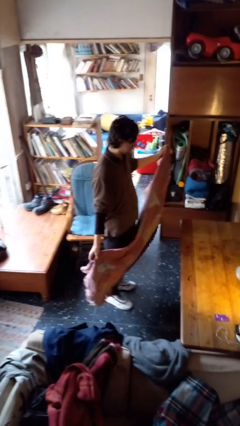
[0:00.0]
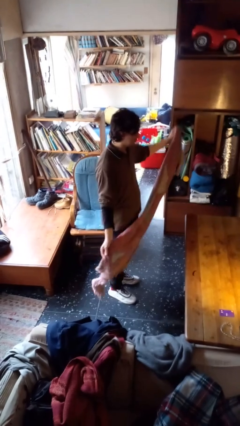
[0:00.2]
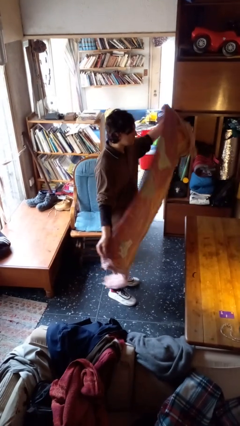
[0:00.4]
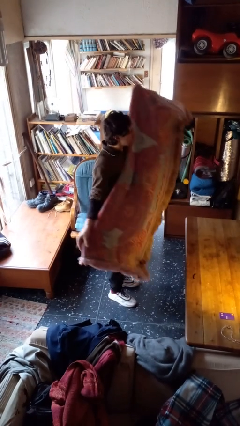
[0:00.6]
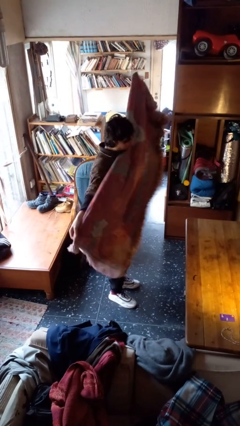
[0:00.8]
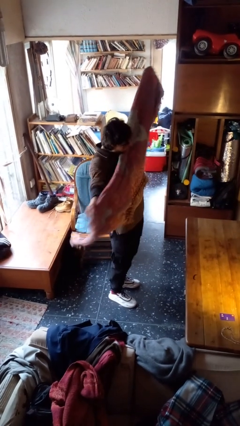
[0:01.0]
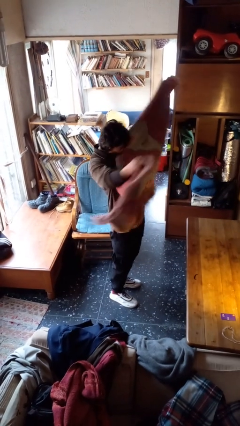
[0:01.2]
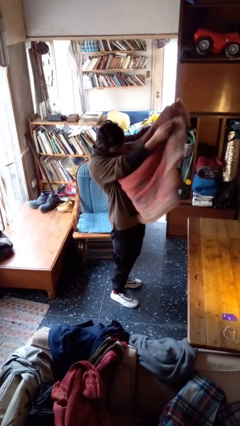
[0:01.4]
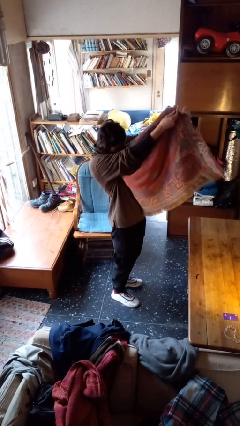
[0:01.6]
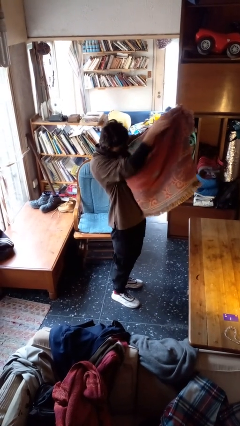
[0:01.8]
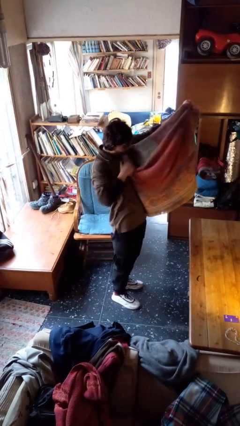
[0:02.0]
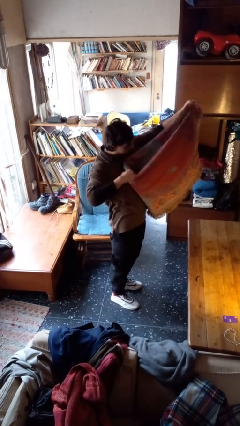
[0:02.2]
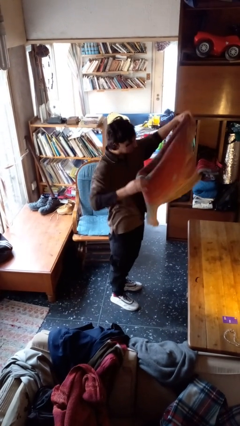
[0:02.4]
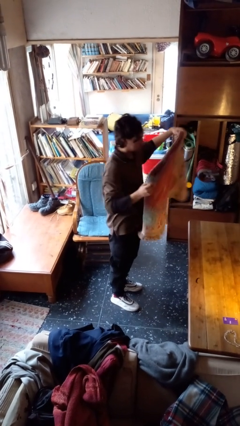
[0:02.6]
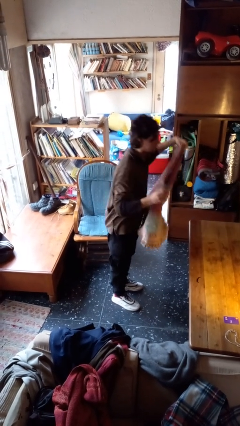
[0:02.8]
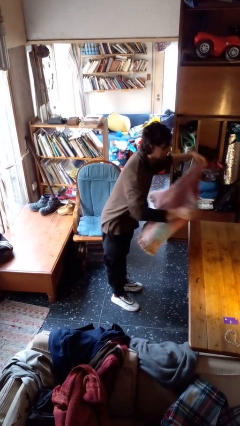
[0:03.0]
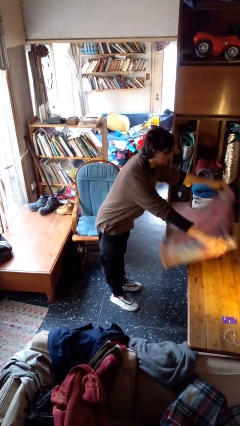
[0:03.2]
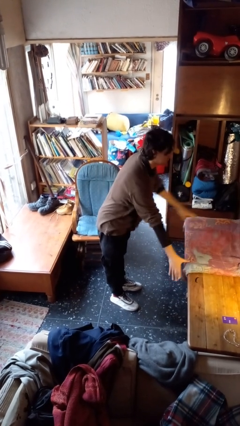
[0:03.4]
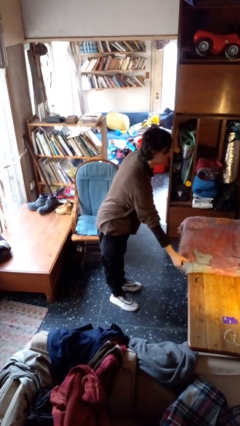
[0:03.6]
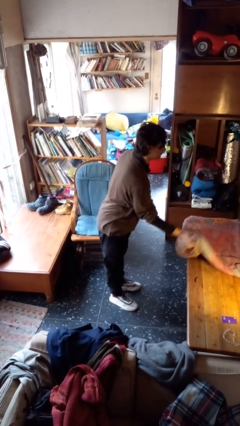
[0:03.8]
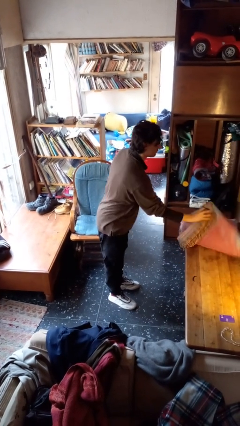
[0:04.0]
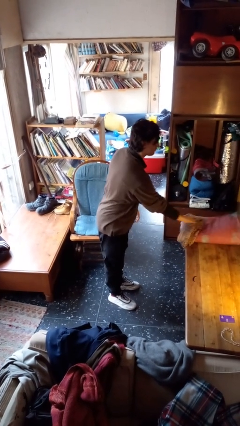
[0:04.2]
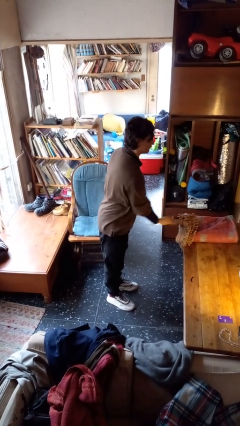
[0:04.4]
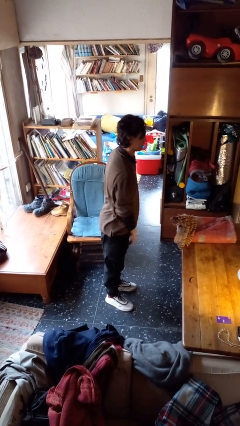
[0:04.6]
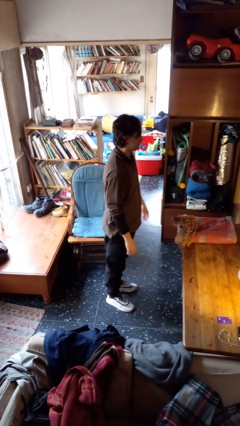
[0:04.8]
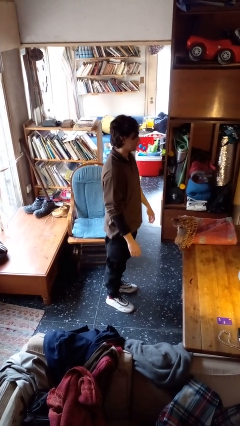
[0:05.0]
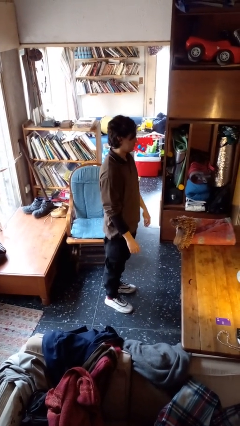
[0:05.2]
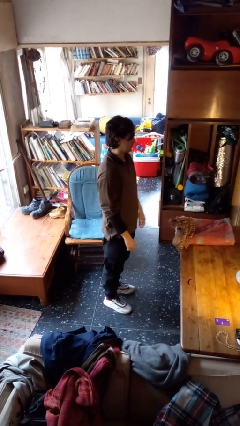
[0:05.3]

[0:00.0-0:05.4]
person folds blanket

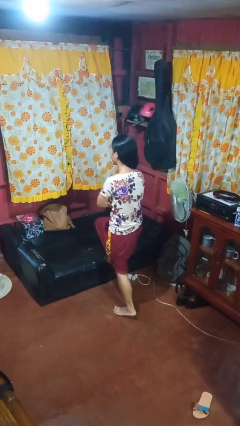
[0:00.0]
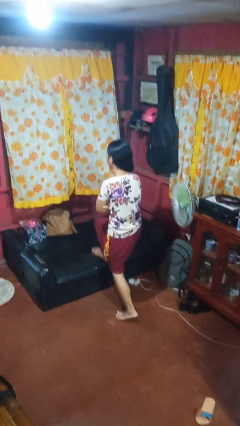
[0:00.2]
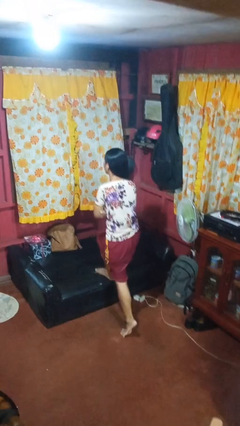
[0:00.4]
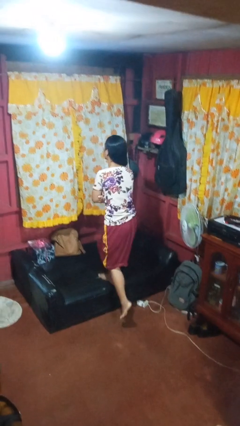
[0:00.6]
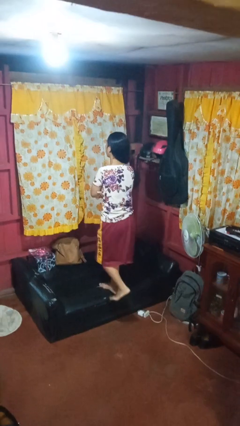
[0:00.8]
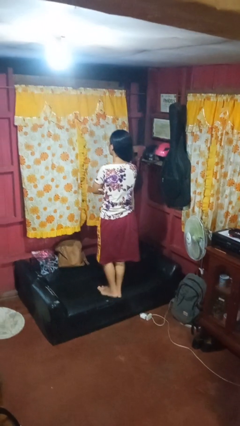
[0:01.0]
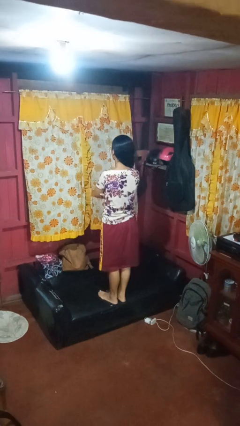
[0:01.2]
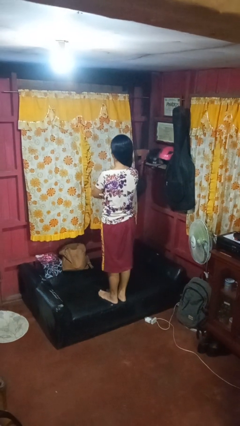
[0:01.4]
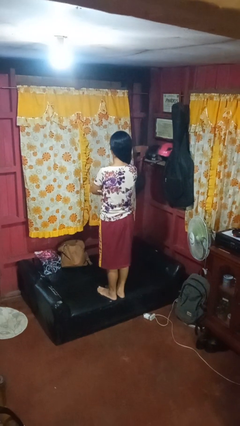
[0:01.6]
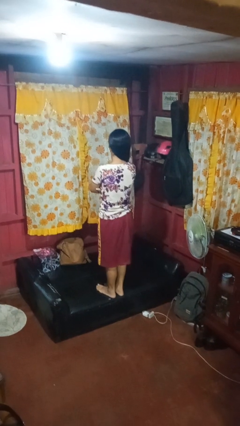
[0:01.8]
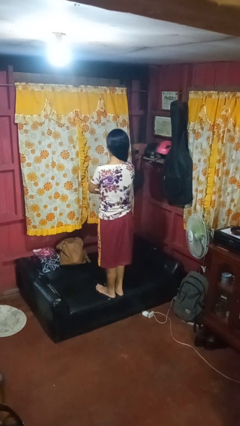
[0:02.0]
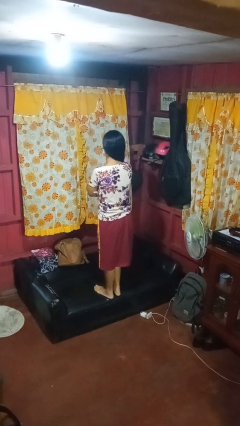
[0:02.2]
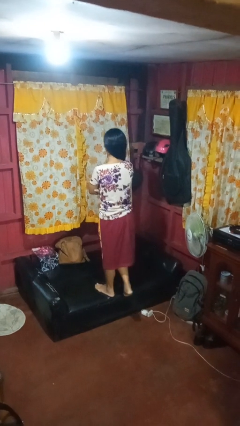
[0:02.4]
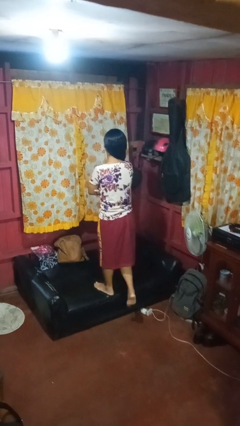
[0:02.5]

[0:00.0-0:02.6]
person climbs on couch

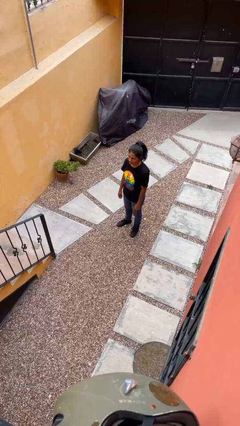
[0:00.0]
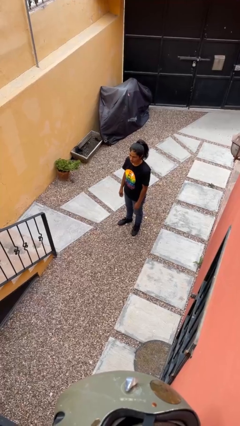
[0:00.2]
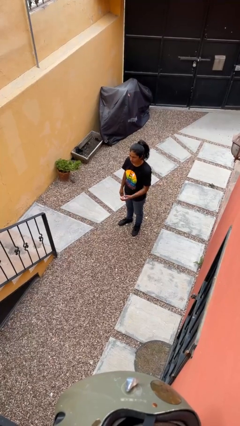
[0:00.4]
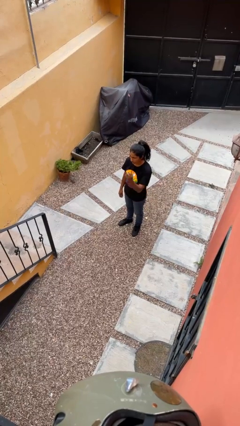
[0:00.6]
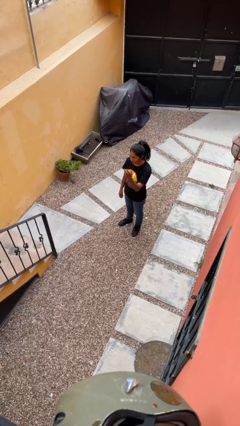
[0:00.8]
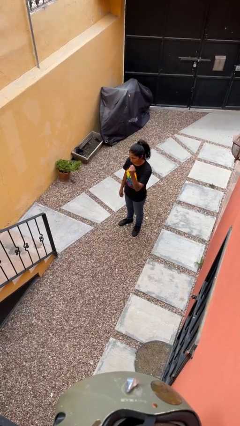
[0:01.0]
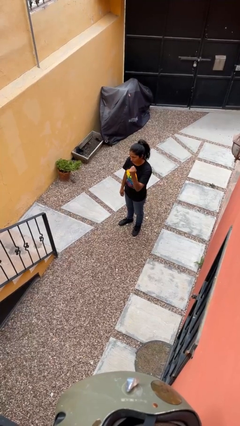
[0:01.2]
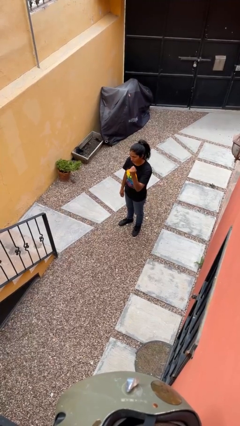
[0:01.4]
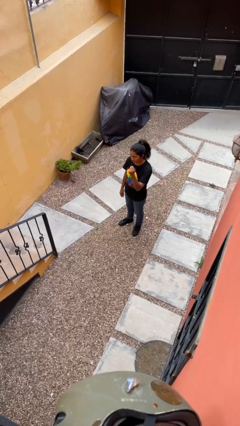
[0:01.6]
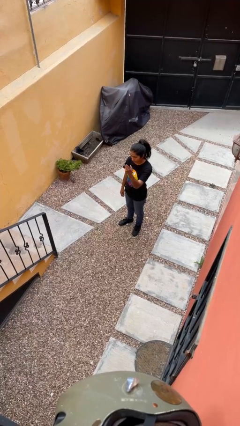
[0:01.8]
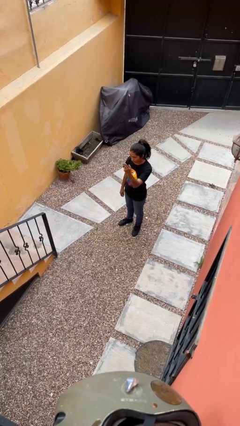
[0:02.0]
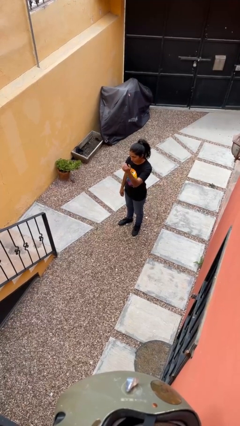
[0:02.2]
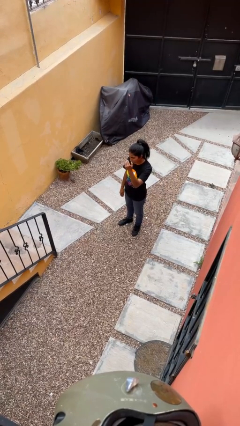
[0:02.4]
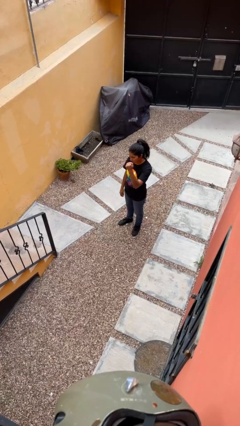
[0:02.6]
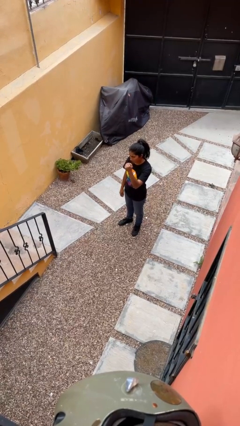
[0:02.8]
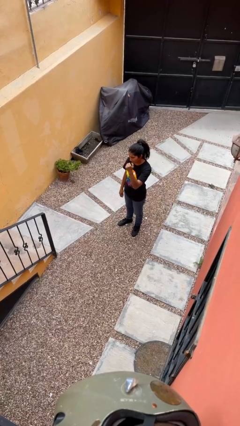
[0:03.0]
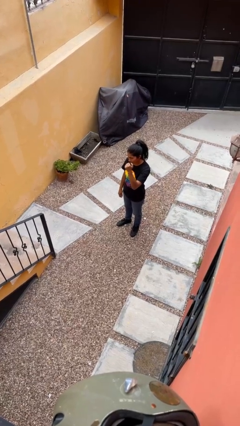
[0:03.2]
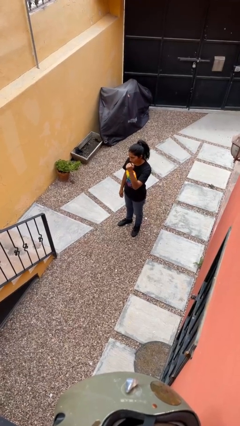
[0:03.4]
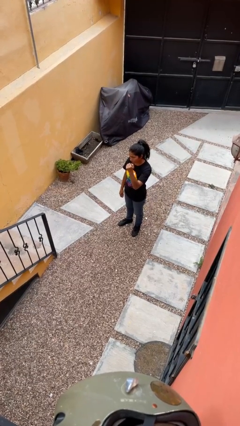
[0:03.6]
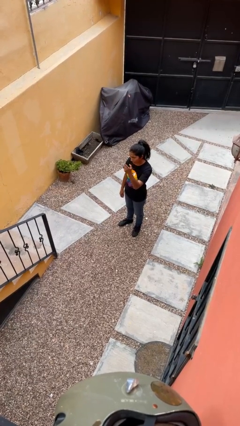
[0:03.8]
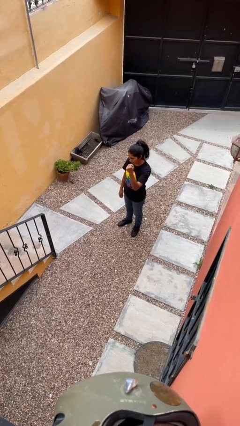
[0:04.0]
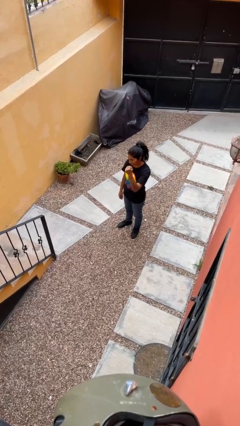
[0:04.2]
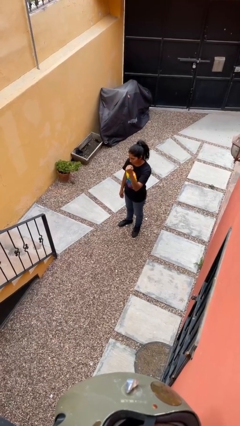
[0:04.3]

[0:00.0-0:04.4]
person gestures come here

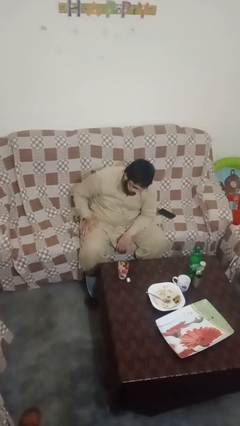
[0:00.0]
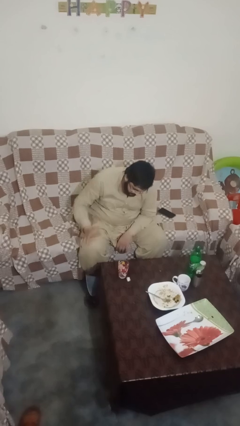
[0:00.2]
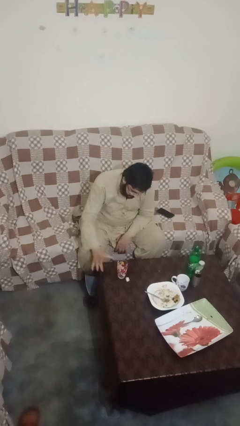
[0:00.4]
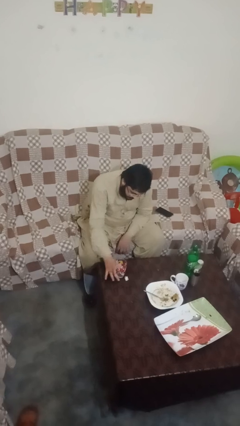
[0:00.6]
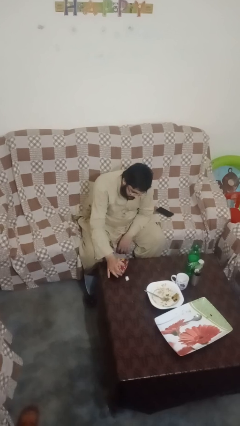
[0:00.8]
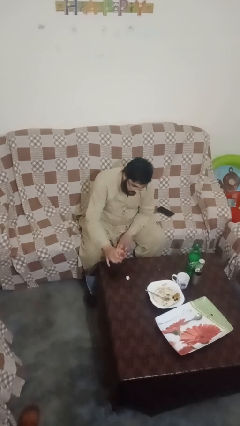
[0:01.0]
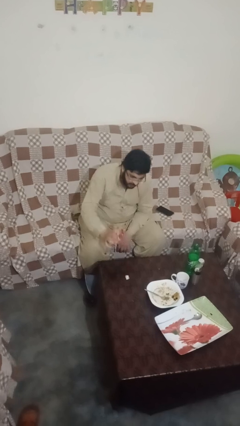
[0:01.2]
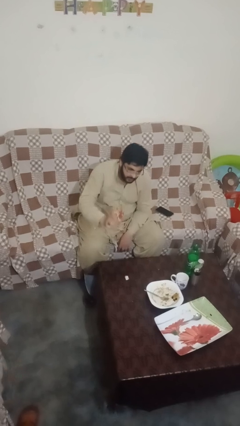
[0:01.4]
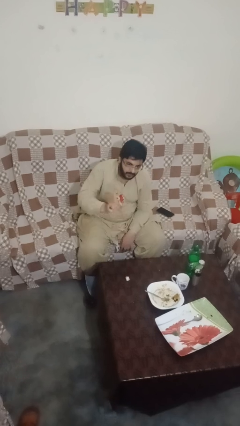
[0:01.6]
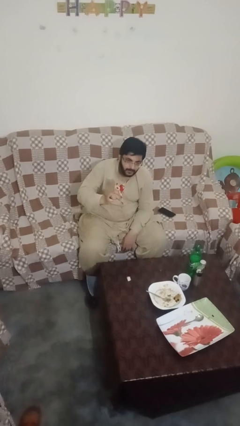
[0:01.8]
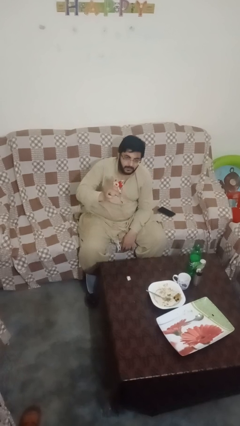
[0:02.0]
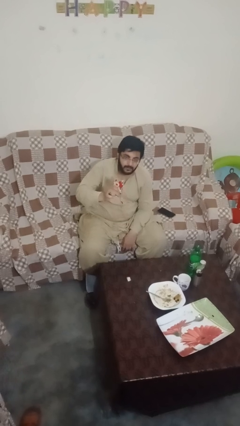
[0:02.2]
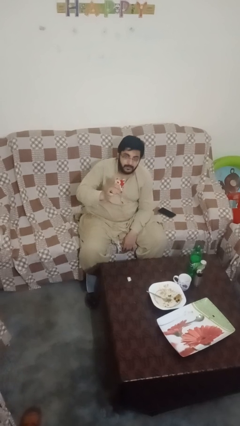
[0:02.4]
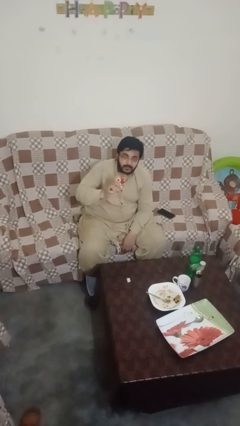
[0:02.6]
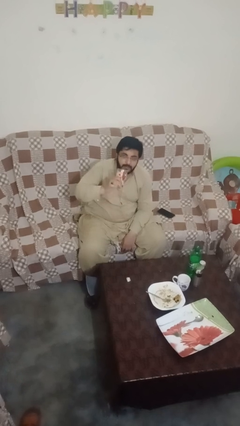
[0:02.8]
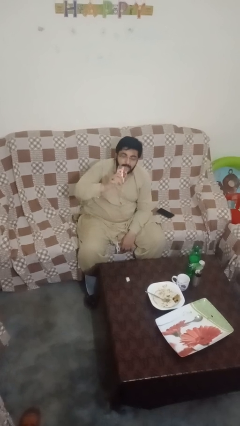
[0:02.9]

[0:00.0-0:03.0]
person picks up object from table

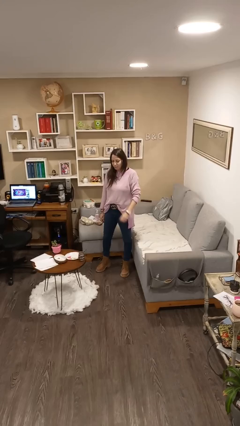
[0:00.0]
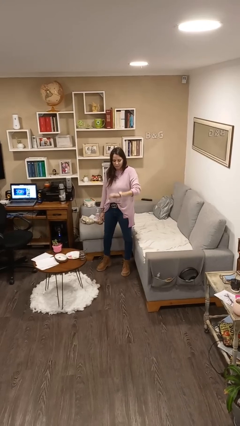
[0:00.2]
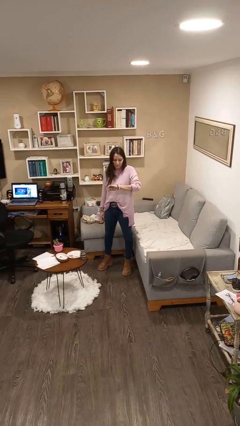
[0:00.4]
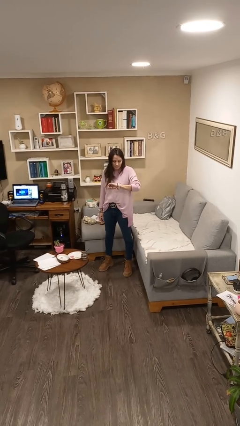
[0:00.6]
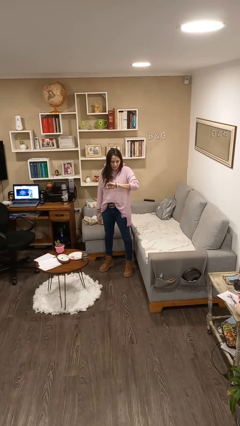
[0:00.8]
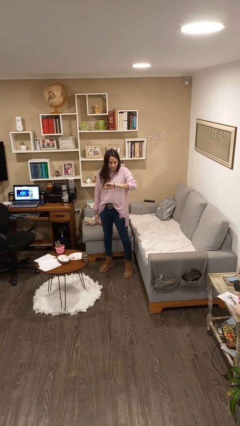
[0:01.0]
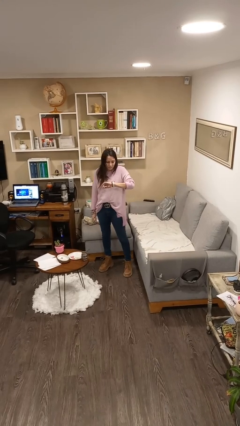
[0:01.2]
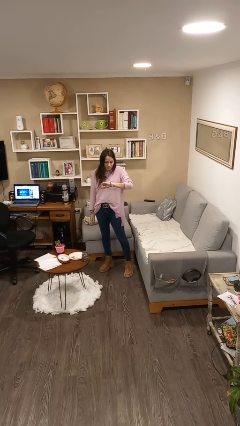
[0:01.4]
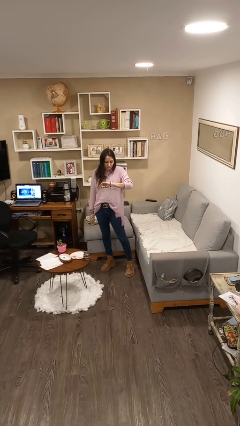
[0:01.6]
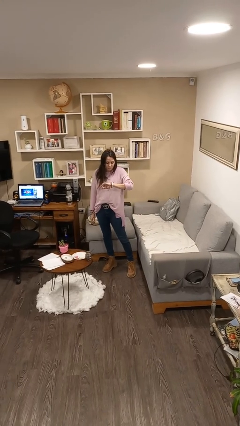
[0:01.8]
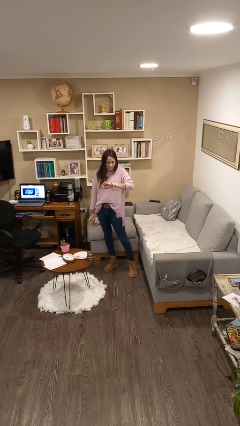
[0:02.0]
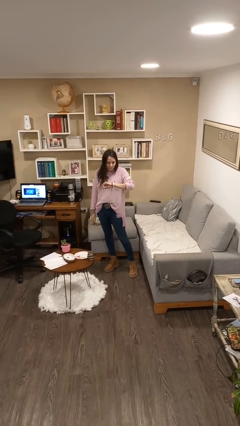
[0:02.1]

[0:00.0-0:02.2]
person looks at wristwatch
